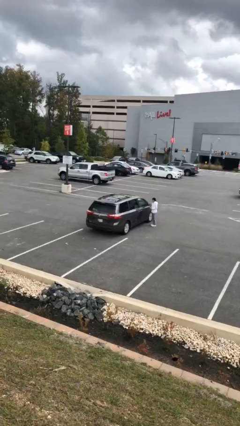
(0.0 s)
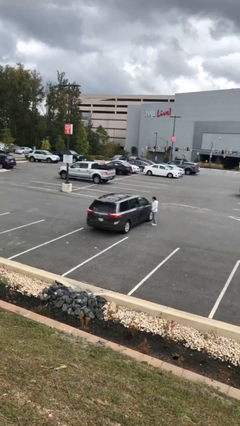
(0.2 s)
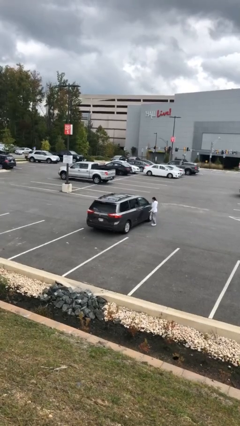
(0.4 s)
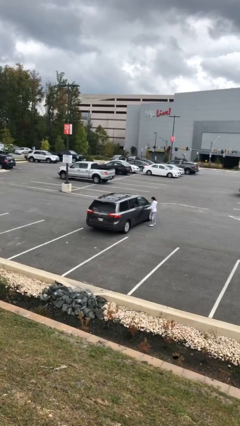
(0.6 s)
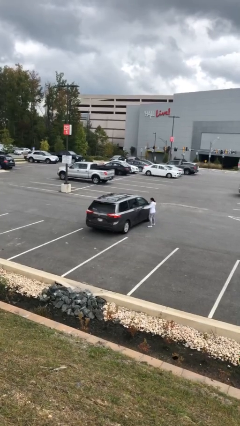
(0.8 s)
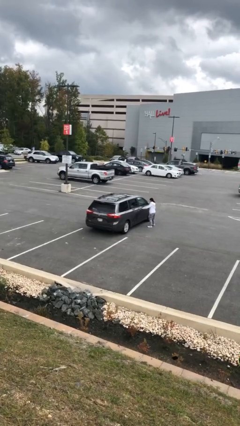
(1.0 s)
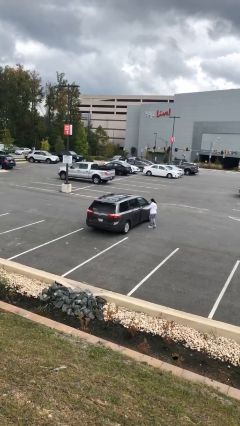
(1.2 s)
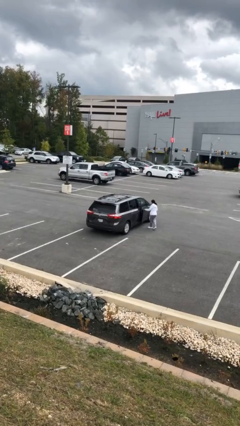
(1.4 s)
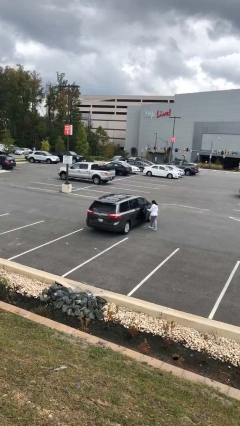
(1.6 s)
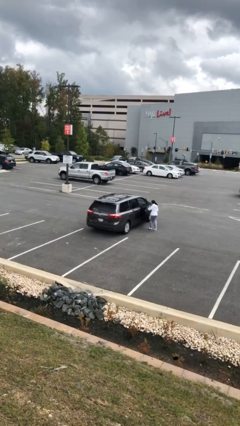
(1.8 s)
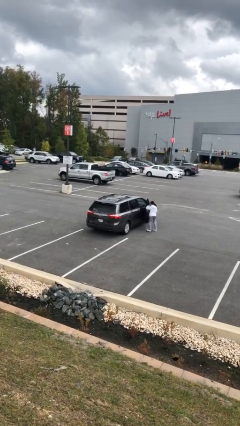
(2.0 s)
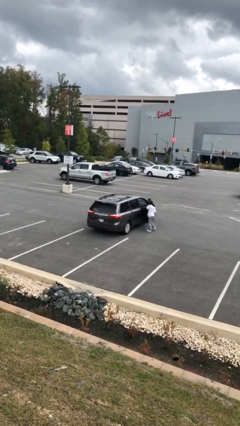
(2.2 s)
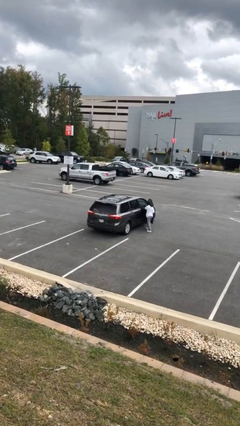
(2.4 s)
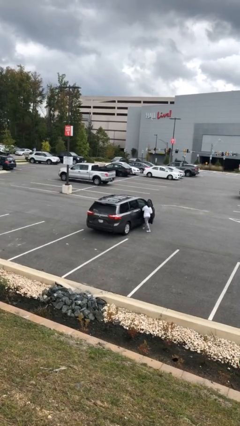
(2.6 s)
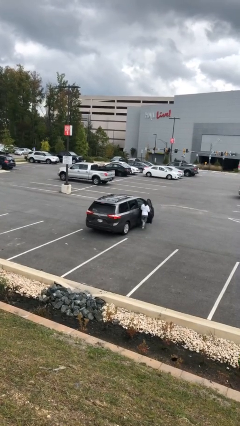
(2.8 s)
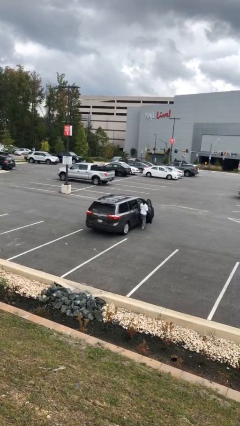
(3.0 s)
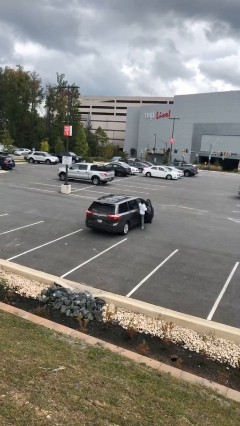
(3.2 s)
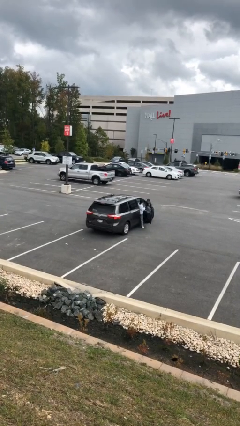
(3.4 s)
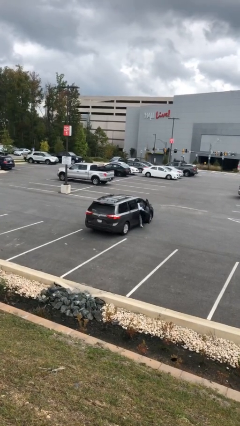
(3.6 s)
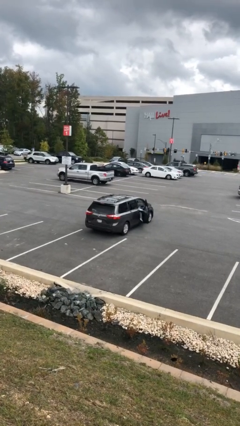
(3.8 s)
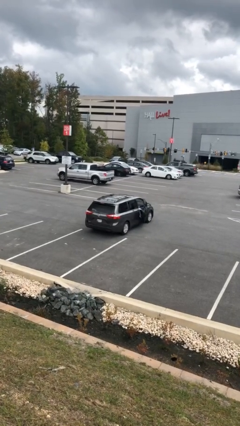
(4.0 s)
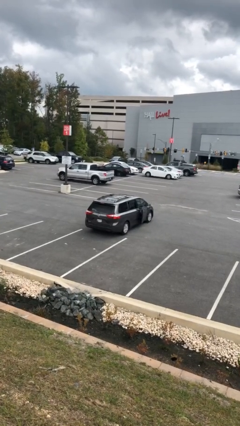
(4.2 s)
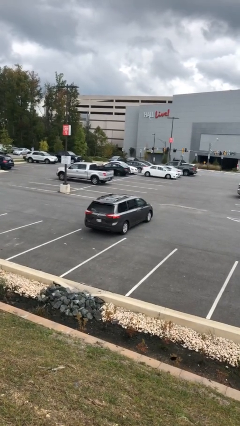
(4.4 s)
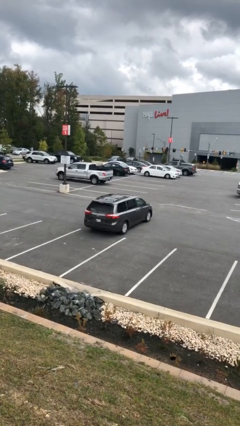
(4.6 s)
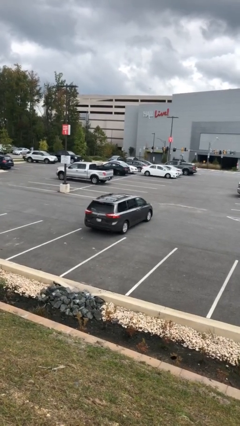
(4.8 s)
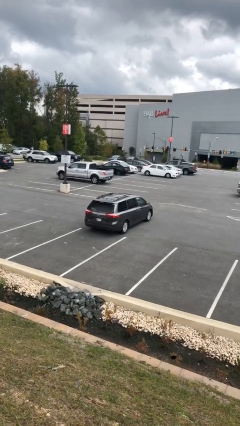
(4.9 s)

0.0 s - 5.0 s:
car picks up person

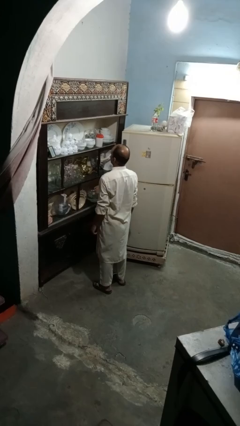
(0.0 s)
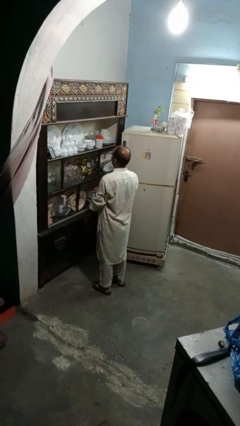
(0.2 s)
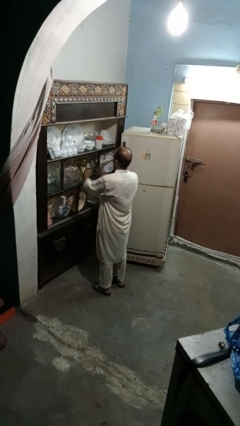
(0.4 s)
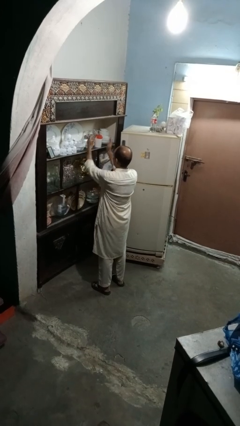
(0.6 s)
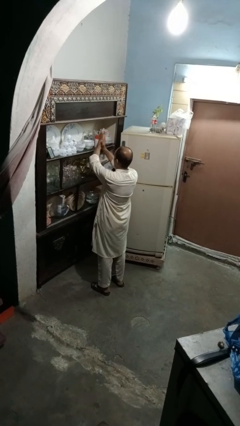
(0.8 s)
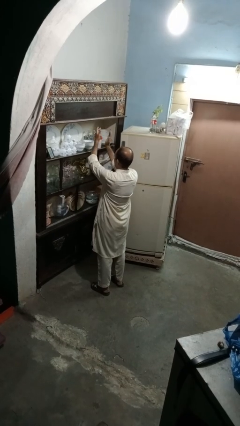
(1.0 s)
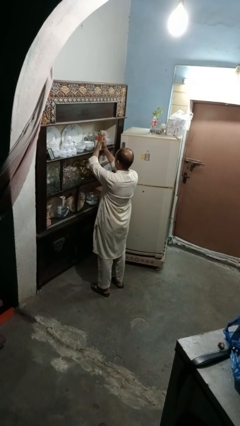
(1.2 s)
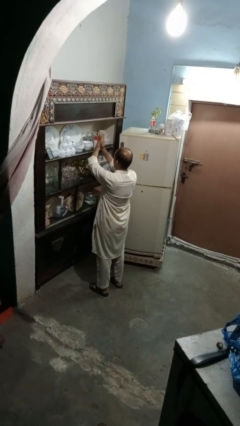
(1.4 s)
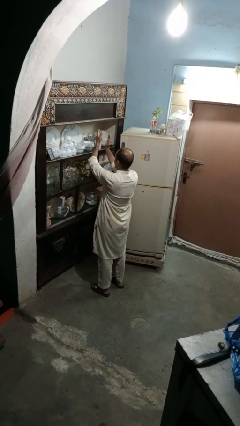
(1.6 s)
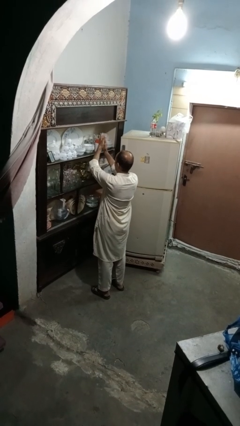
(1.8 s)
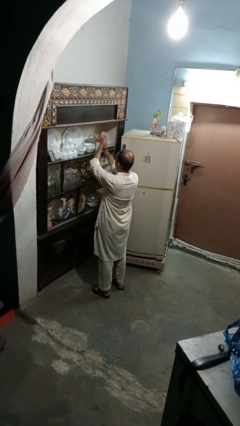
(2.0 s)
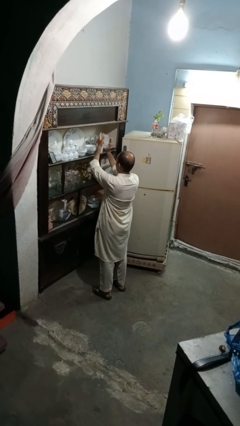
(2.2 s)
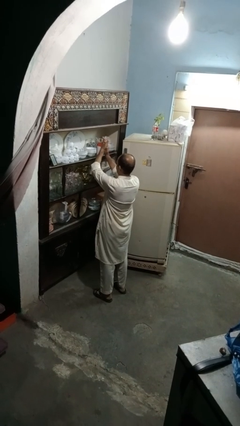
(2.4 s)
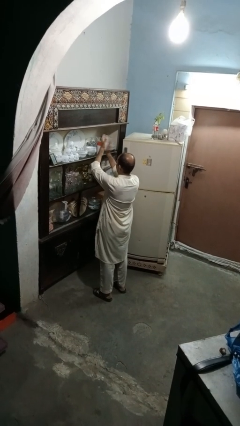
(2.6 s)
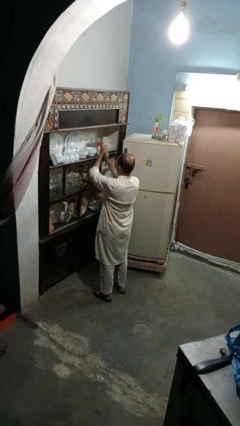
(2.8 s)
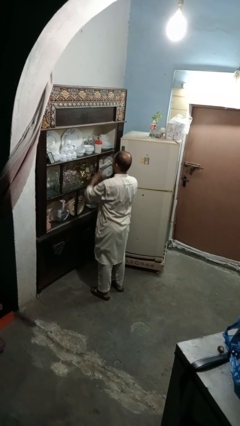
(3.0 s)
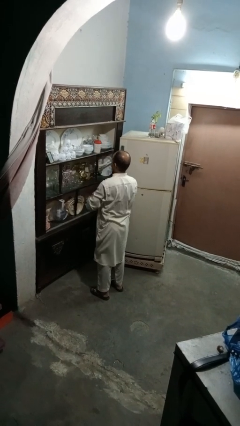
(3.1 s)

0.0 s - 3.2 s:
person claps hands

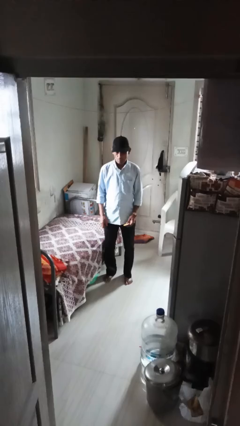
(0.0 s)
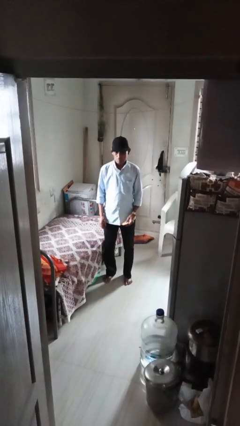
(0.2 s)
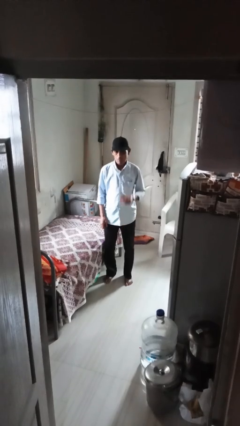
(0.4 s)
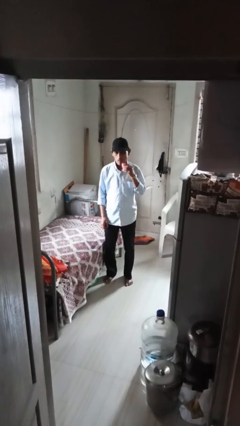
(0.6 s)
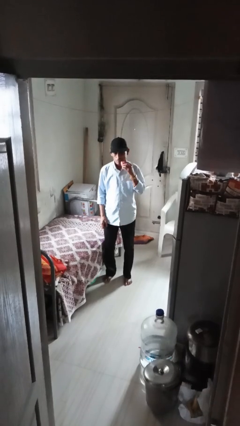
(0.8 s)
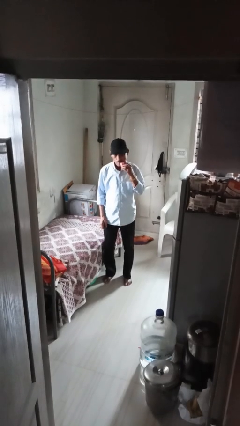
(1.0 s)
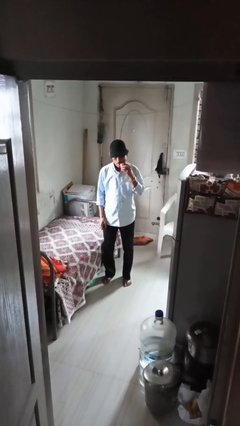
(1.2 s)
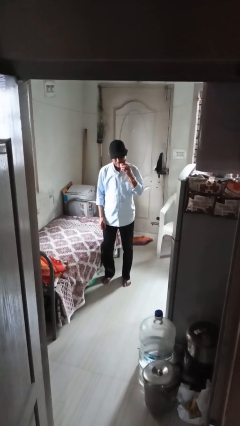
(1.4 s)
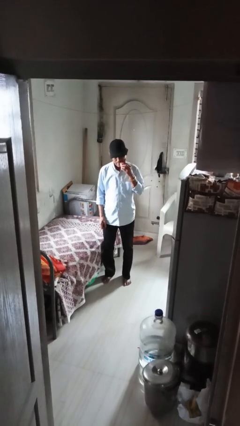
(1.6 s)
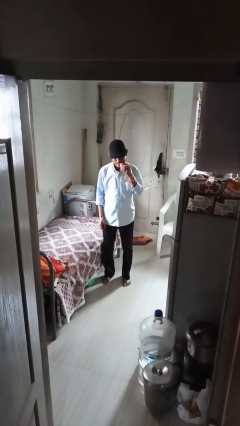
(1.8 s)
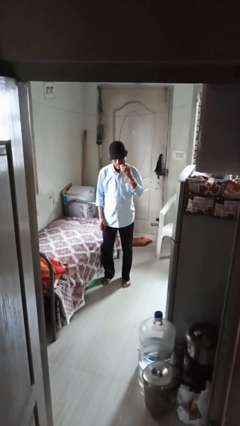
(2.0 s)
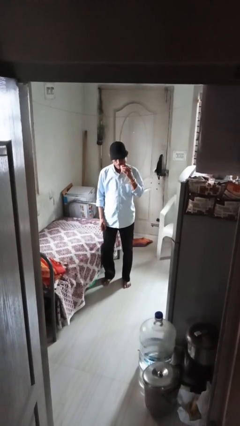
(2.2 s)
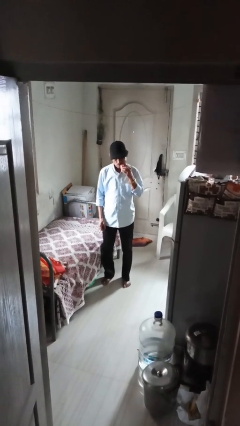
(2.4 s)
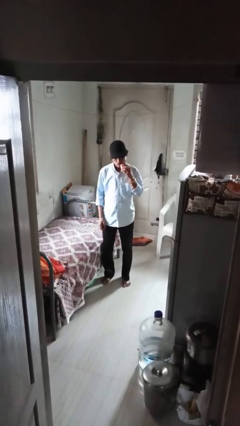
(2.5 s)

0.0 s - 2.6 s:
person eats apple

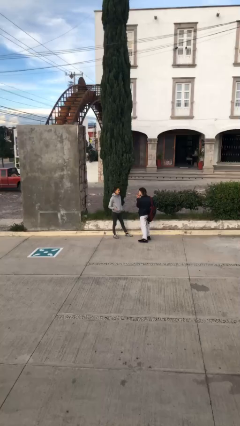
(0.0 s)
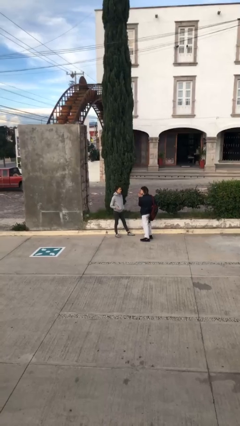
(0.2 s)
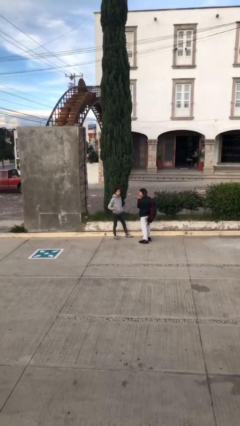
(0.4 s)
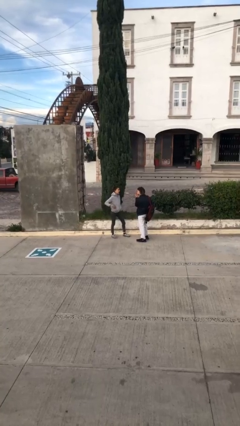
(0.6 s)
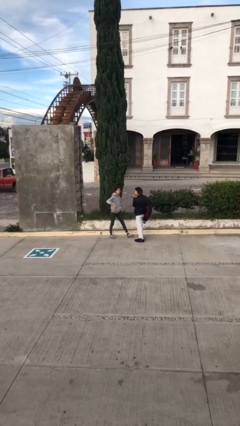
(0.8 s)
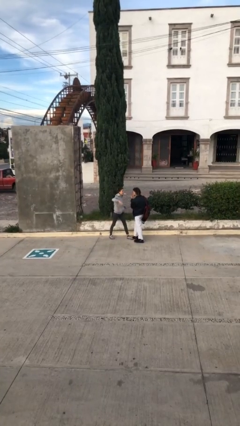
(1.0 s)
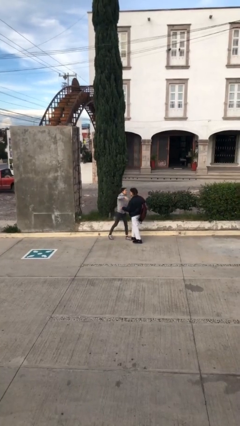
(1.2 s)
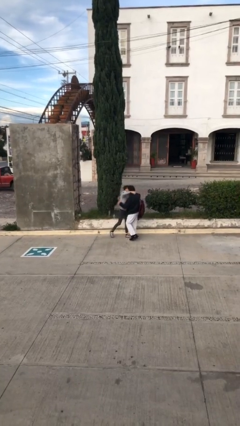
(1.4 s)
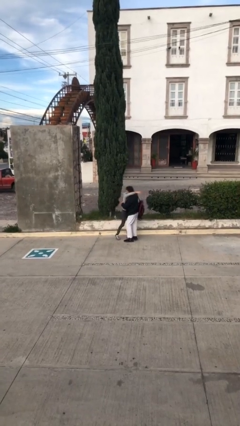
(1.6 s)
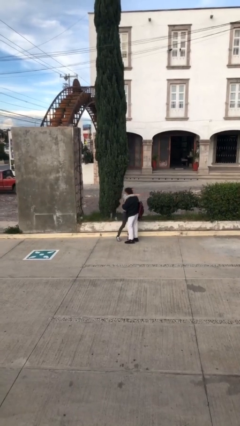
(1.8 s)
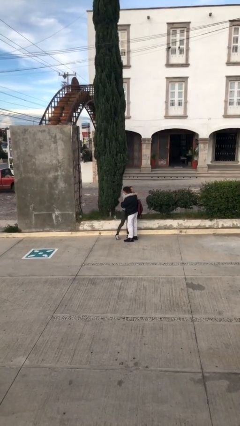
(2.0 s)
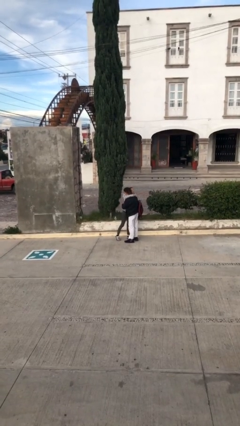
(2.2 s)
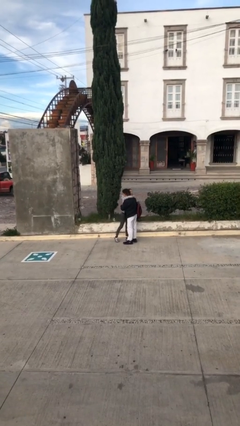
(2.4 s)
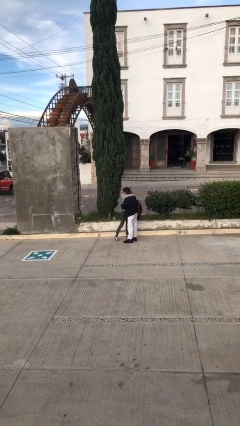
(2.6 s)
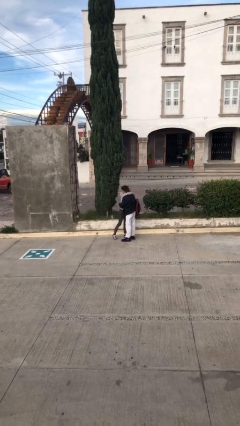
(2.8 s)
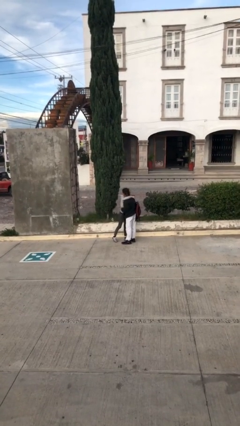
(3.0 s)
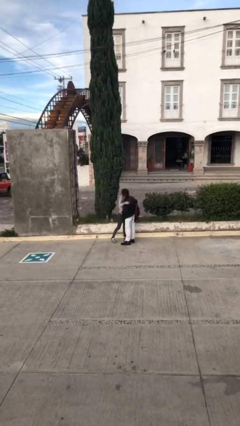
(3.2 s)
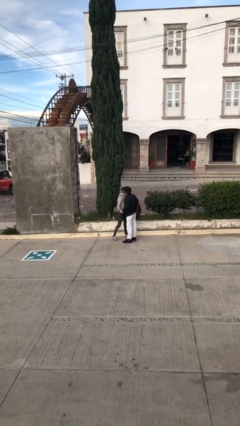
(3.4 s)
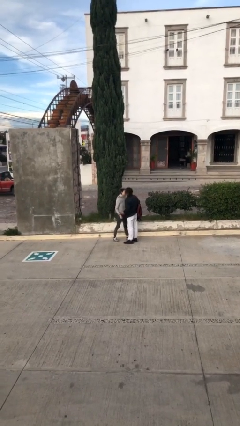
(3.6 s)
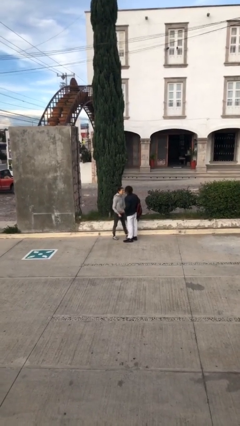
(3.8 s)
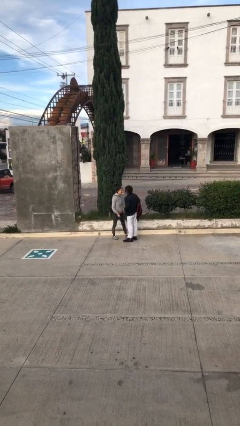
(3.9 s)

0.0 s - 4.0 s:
person embraces person

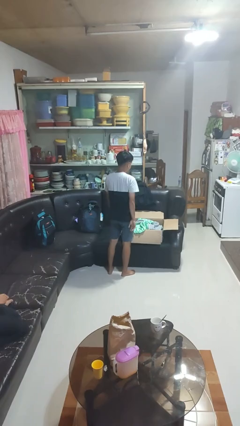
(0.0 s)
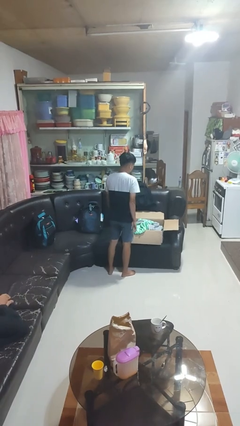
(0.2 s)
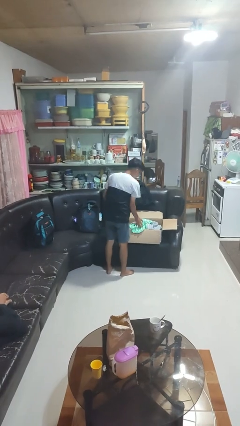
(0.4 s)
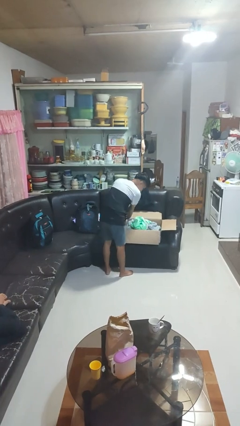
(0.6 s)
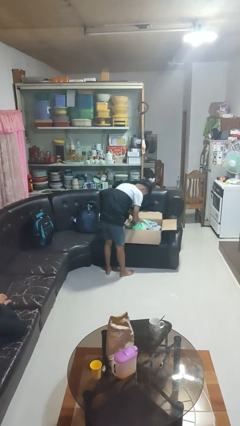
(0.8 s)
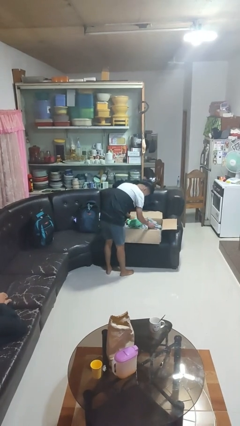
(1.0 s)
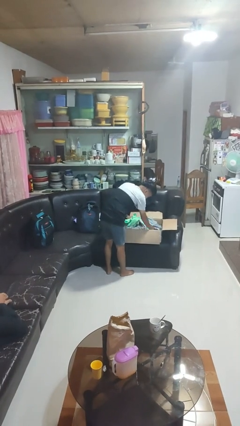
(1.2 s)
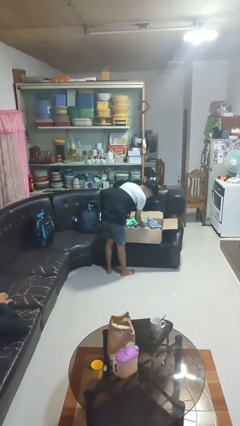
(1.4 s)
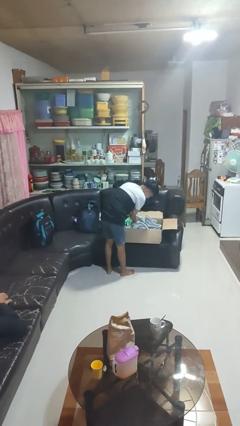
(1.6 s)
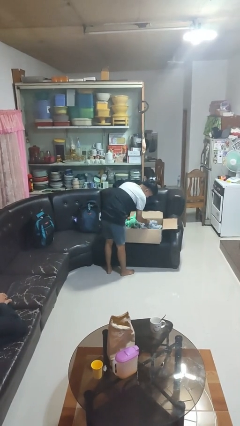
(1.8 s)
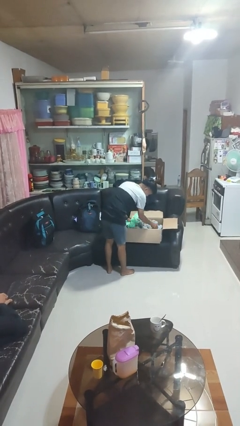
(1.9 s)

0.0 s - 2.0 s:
person searches in box

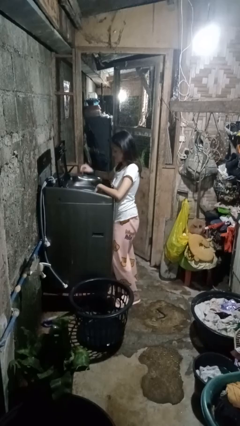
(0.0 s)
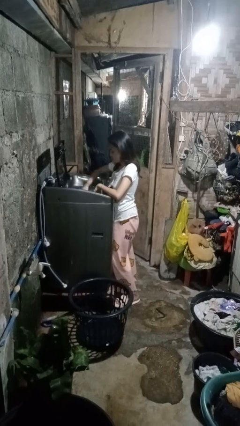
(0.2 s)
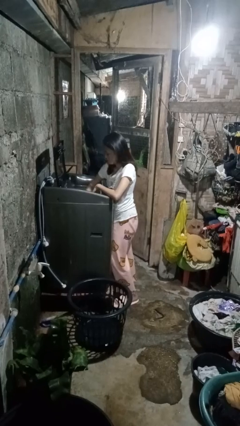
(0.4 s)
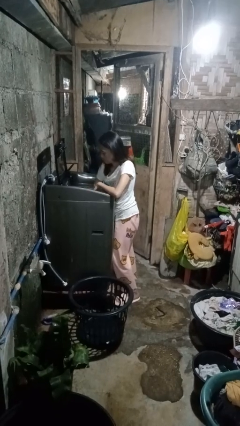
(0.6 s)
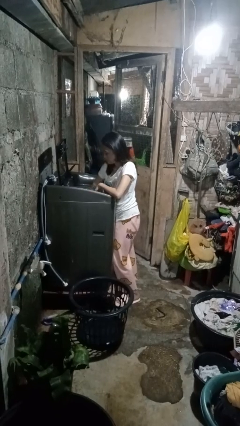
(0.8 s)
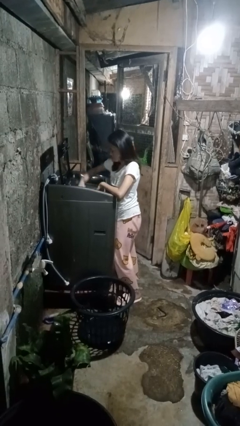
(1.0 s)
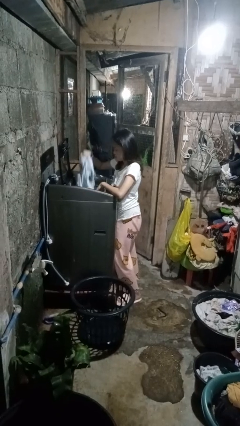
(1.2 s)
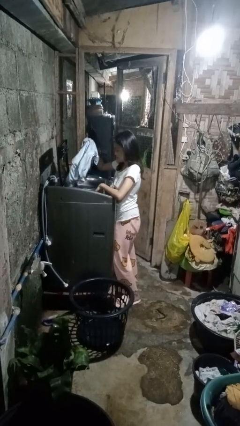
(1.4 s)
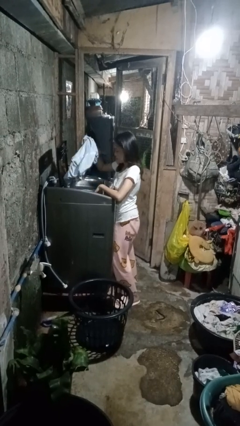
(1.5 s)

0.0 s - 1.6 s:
person unloads clotheswasher
